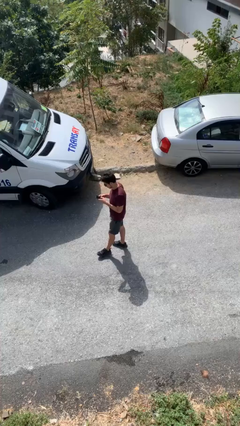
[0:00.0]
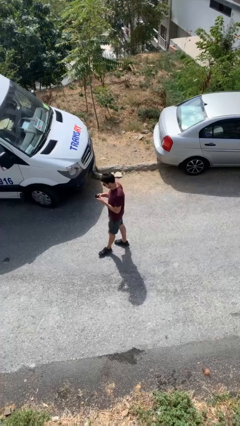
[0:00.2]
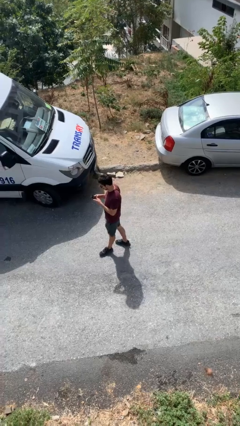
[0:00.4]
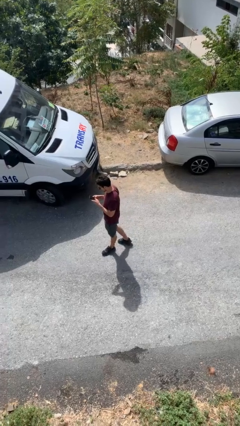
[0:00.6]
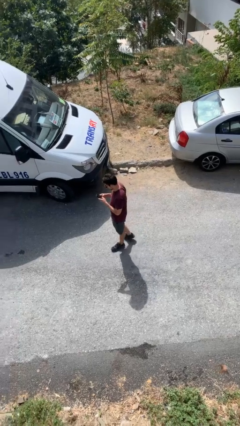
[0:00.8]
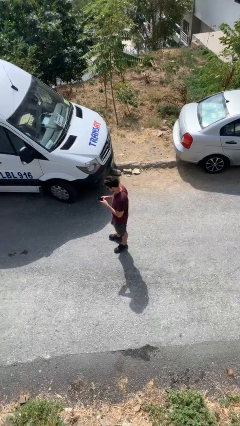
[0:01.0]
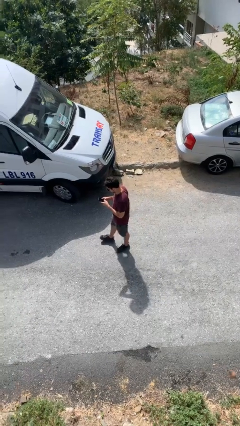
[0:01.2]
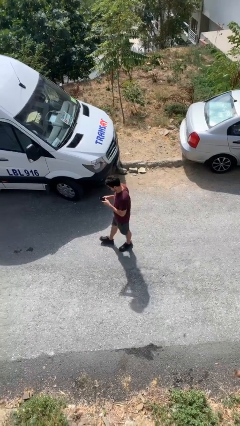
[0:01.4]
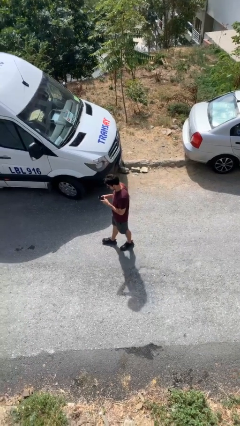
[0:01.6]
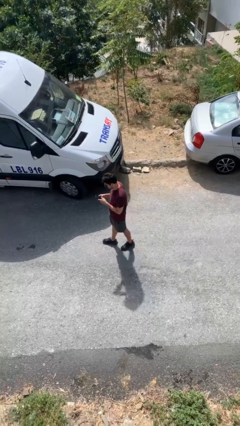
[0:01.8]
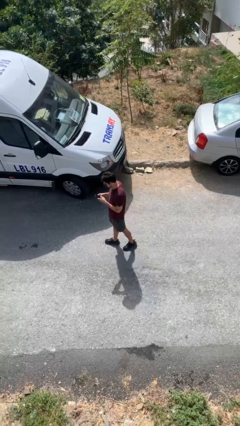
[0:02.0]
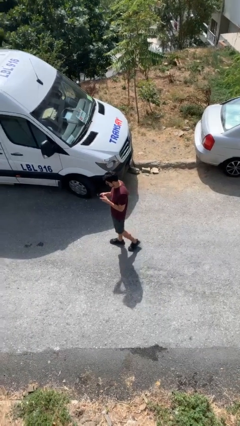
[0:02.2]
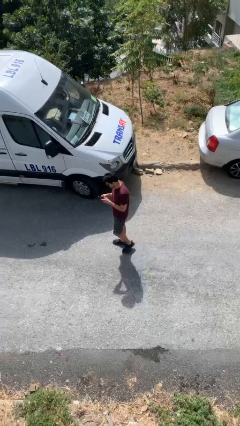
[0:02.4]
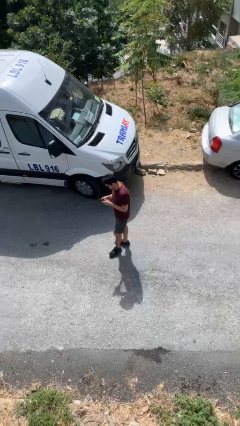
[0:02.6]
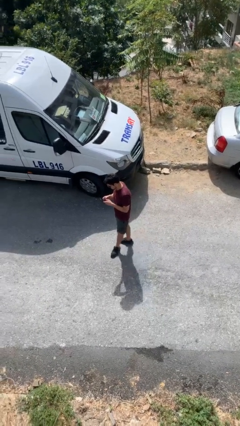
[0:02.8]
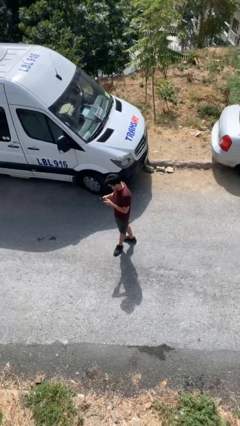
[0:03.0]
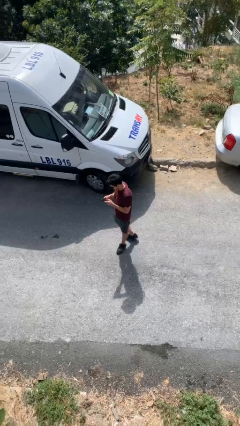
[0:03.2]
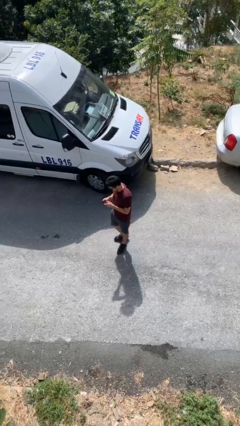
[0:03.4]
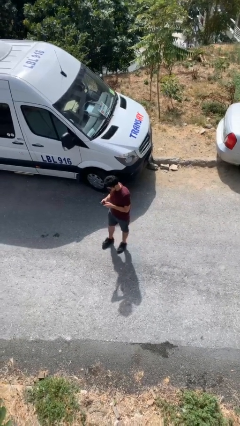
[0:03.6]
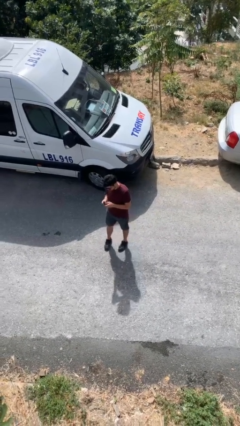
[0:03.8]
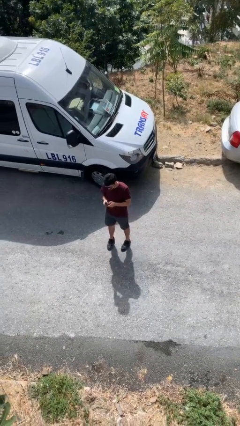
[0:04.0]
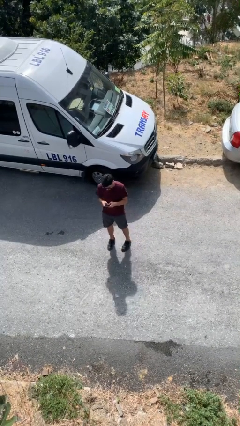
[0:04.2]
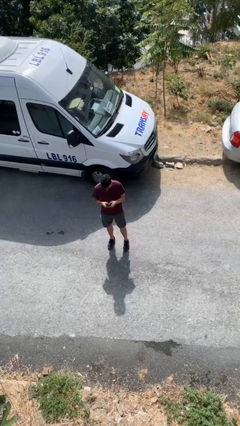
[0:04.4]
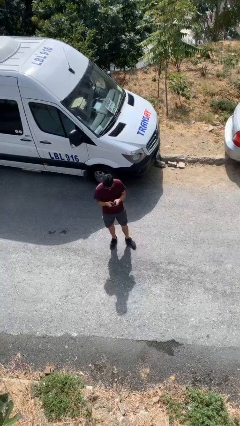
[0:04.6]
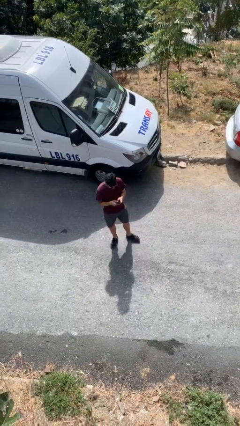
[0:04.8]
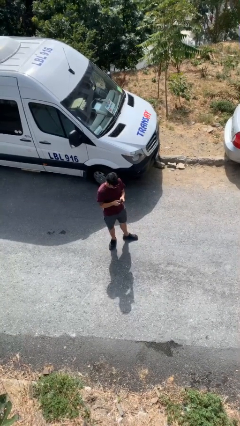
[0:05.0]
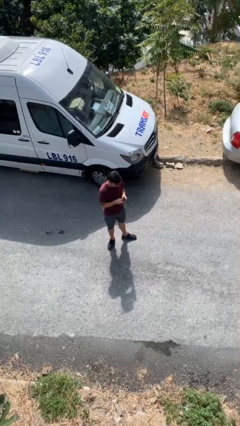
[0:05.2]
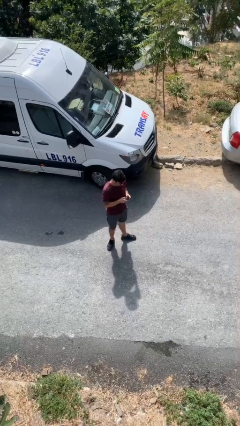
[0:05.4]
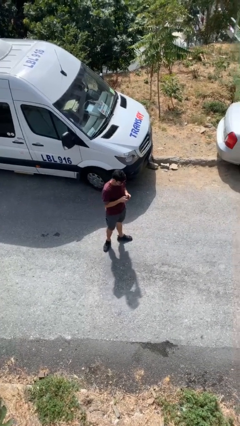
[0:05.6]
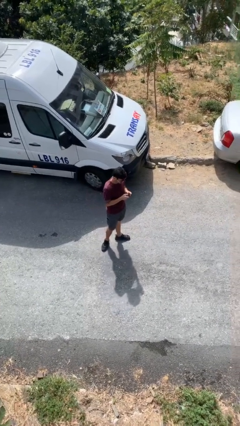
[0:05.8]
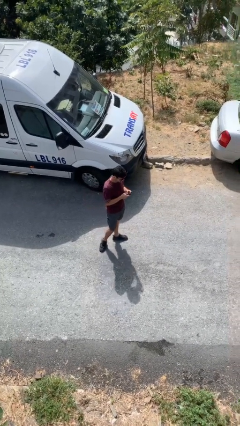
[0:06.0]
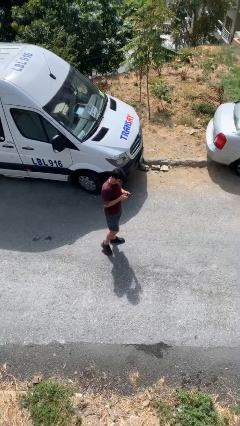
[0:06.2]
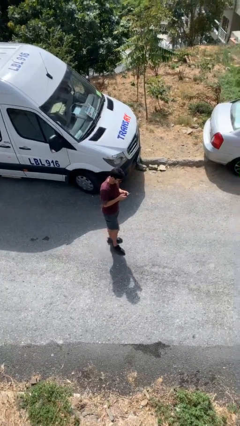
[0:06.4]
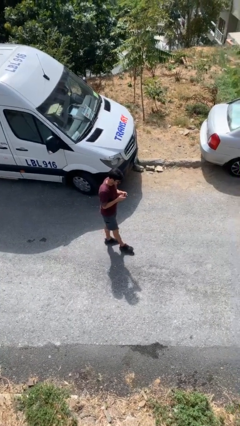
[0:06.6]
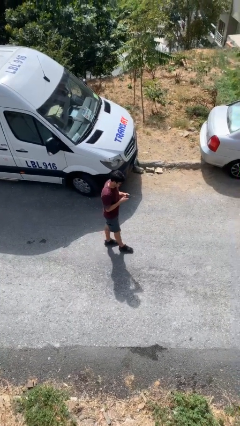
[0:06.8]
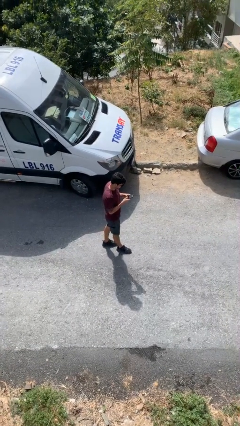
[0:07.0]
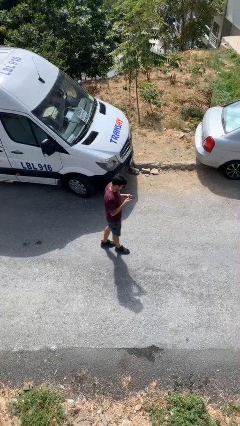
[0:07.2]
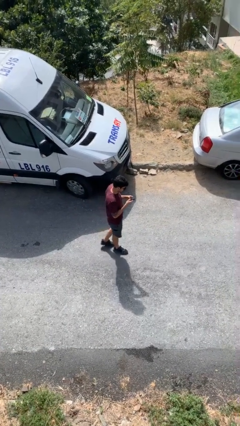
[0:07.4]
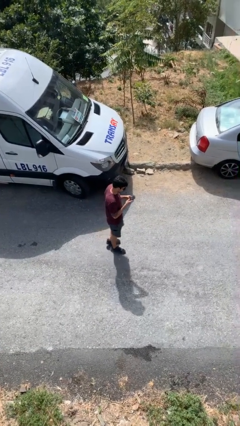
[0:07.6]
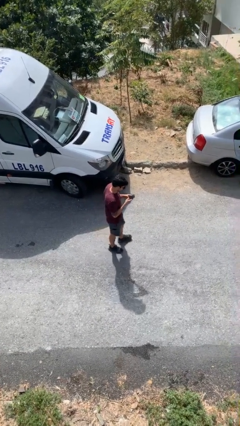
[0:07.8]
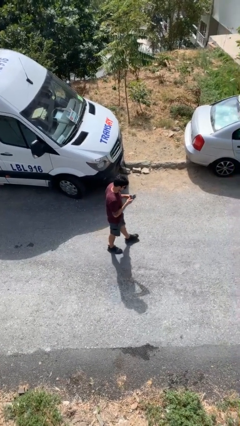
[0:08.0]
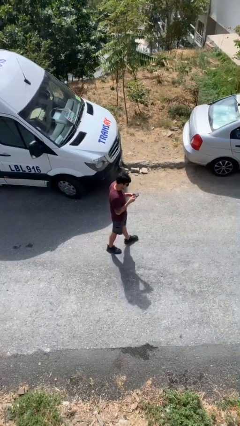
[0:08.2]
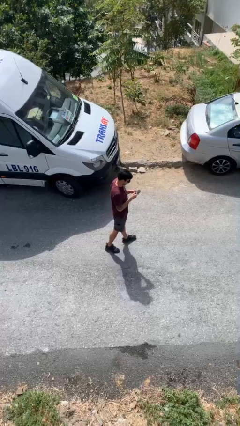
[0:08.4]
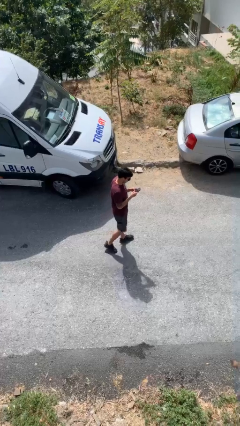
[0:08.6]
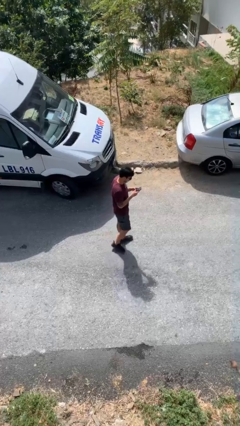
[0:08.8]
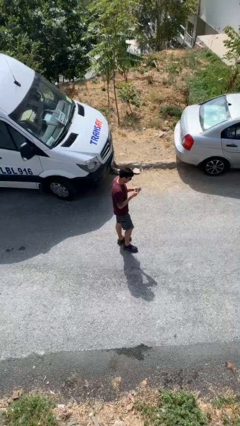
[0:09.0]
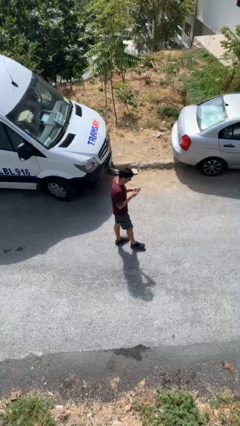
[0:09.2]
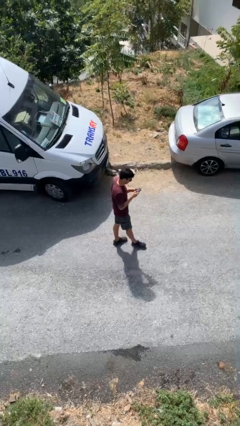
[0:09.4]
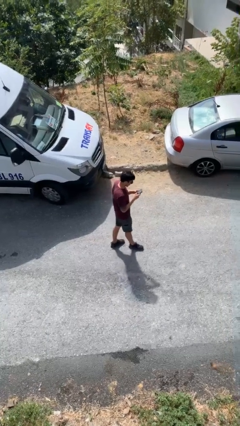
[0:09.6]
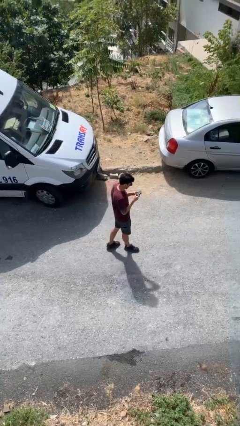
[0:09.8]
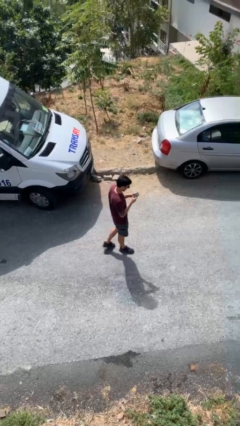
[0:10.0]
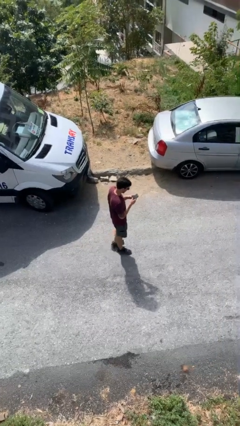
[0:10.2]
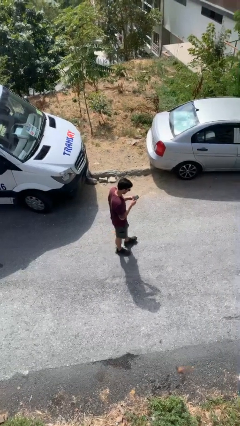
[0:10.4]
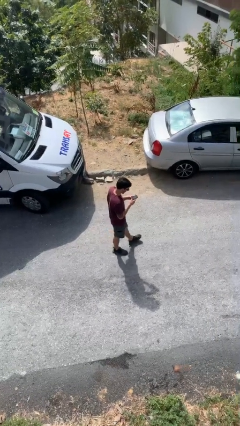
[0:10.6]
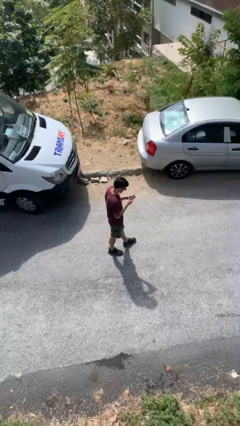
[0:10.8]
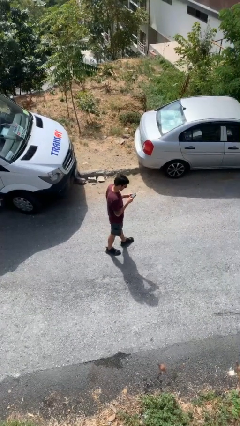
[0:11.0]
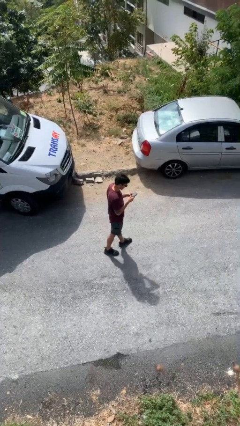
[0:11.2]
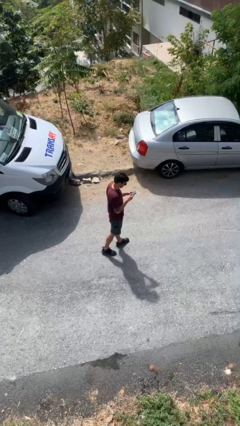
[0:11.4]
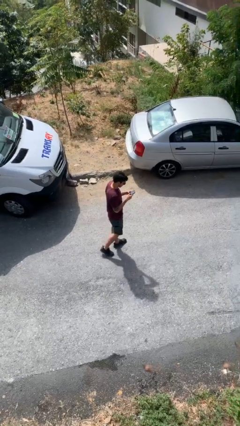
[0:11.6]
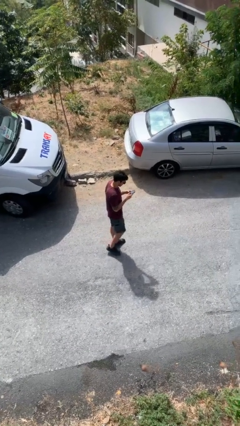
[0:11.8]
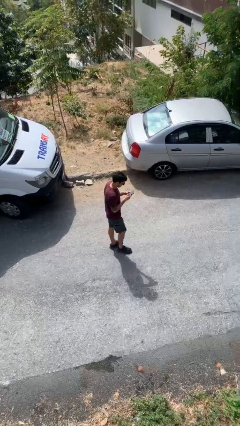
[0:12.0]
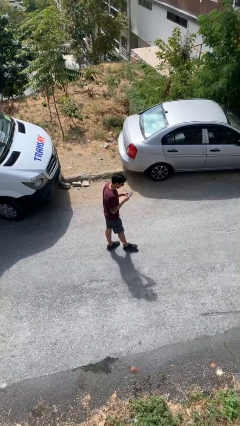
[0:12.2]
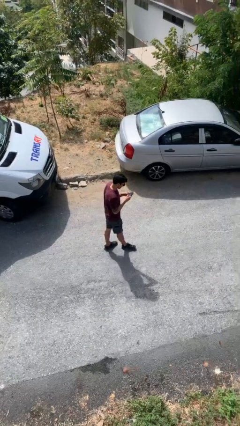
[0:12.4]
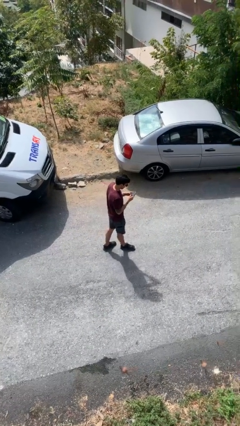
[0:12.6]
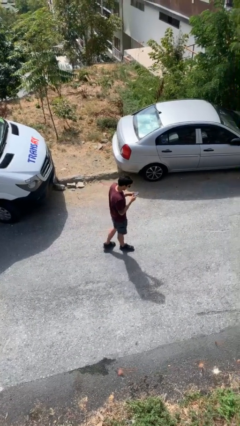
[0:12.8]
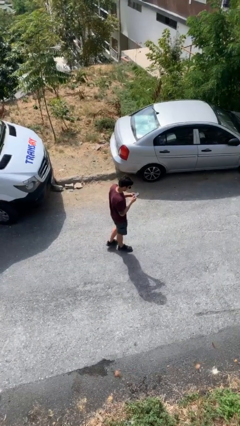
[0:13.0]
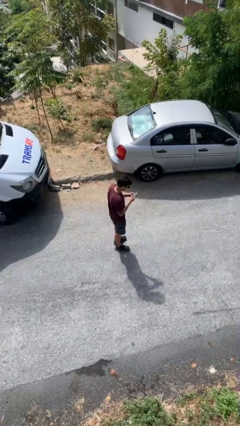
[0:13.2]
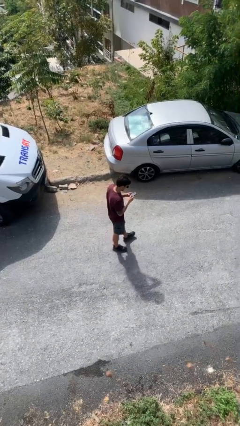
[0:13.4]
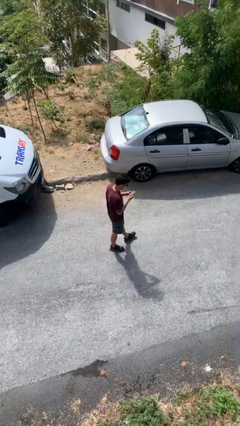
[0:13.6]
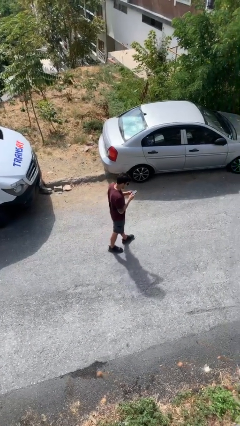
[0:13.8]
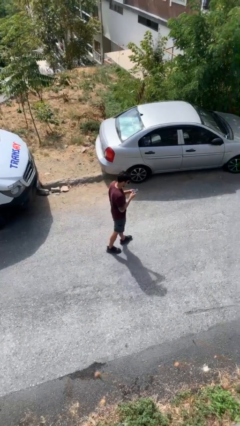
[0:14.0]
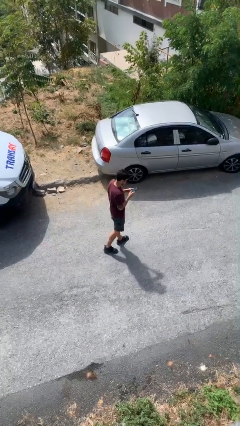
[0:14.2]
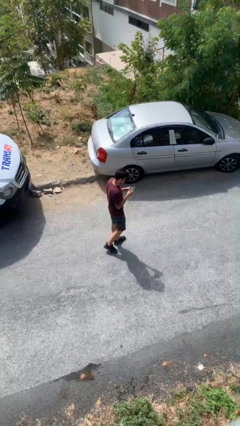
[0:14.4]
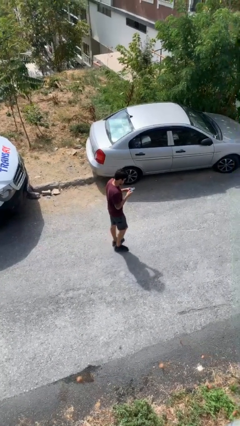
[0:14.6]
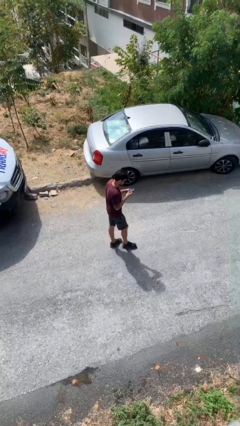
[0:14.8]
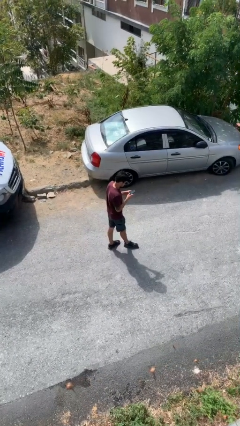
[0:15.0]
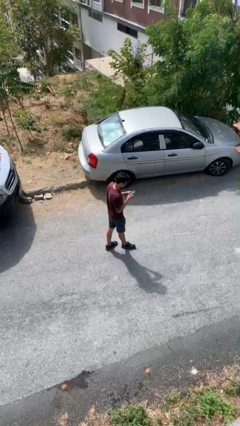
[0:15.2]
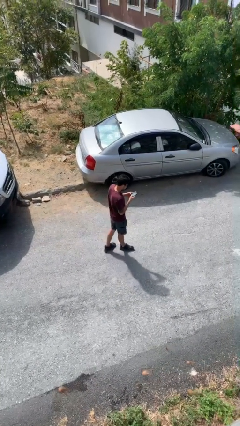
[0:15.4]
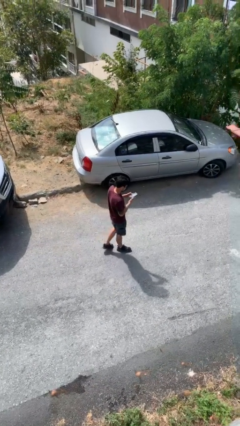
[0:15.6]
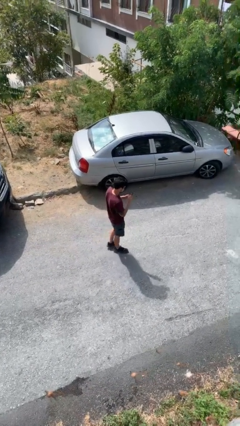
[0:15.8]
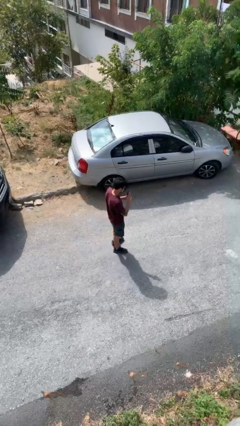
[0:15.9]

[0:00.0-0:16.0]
person texts on phone

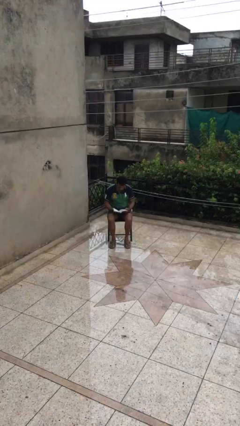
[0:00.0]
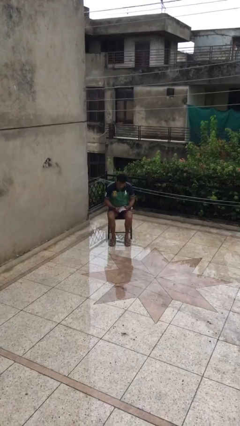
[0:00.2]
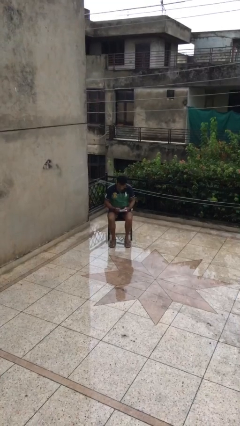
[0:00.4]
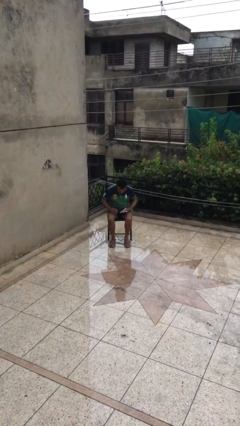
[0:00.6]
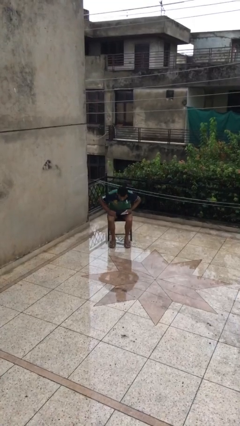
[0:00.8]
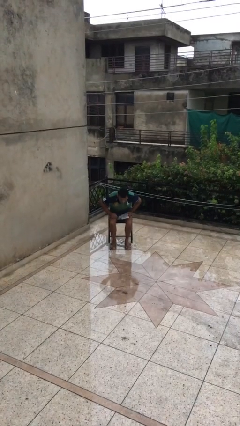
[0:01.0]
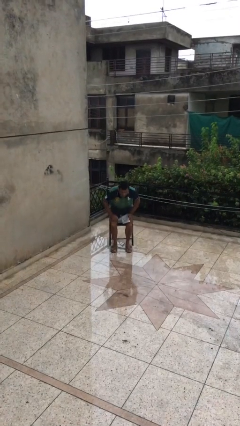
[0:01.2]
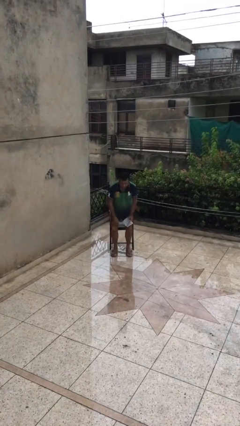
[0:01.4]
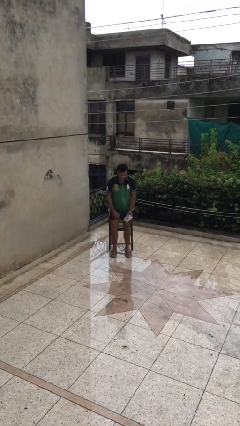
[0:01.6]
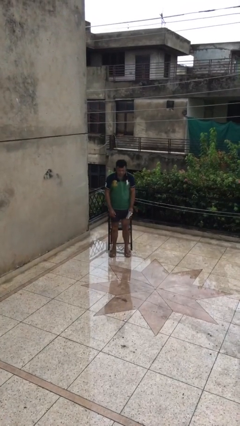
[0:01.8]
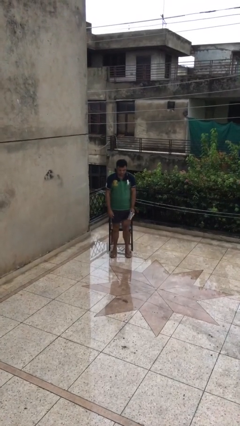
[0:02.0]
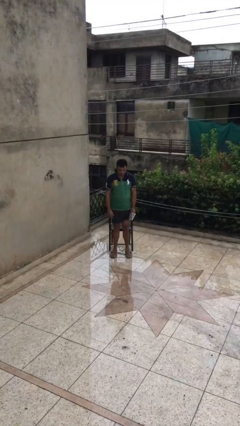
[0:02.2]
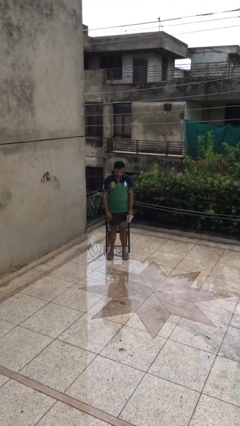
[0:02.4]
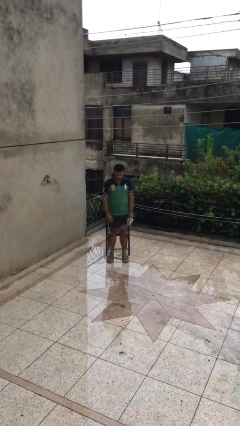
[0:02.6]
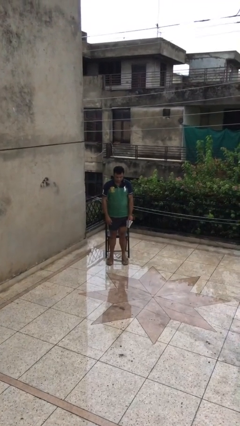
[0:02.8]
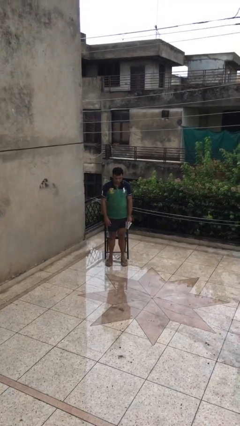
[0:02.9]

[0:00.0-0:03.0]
person stands up
